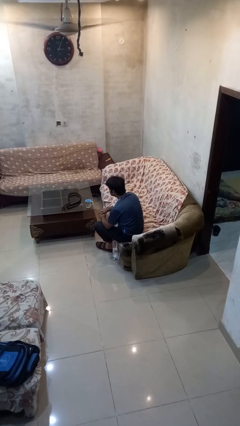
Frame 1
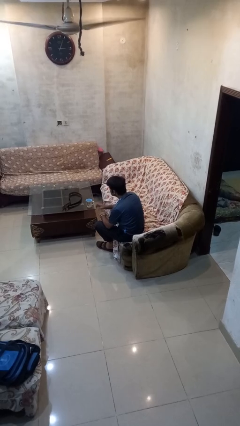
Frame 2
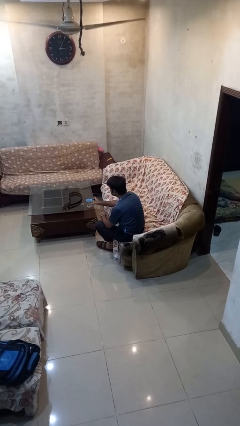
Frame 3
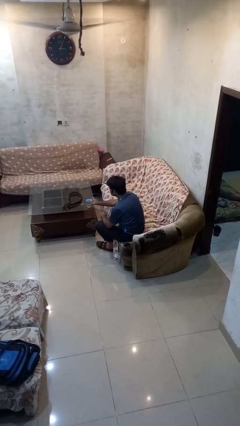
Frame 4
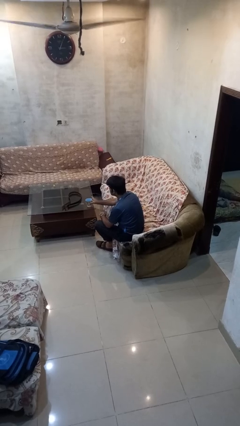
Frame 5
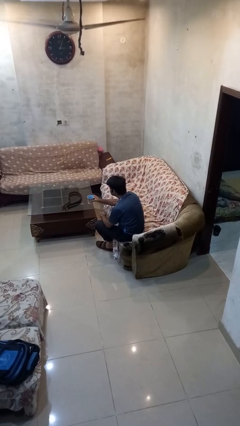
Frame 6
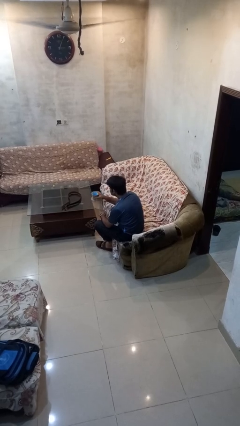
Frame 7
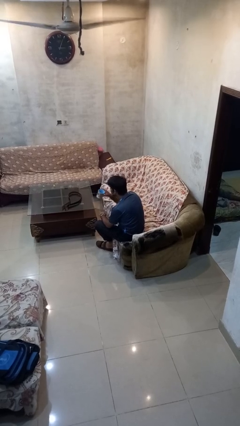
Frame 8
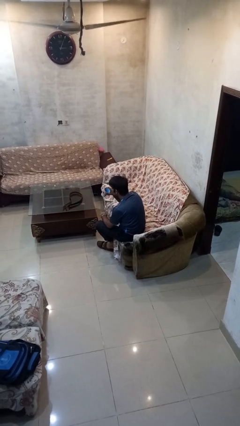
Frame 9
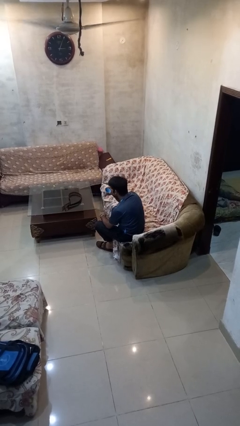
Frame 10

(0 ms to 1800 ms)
person picks up object from table

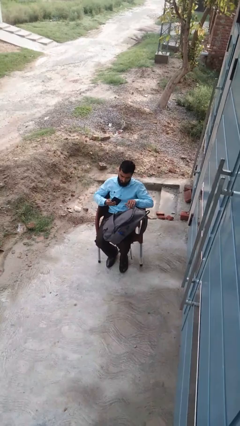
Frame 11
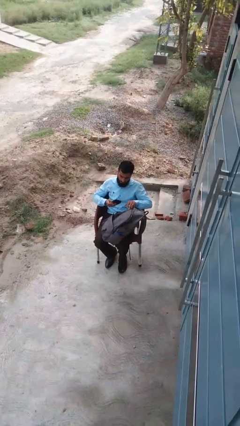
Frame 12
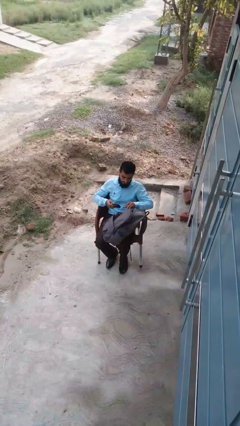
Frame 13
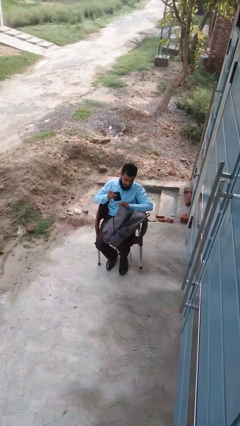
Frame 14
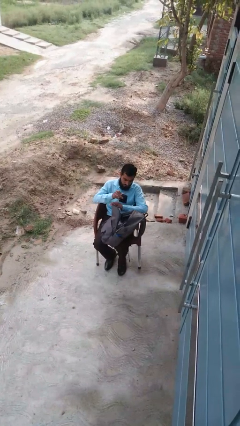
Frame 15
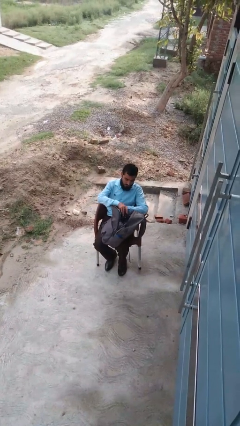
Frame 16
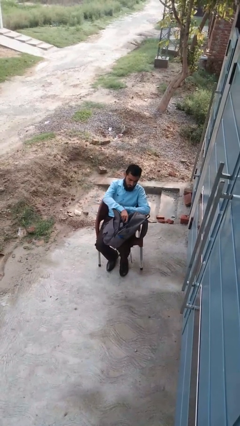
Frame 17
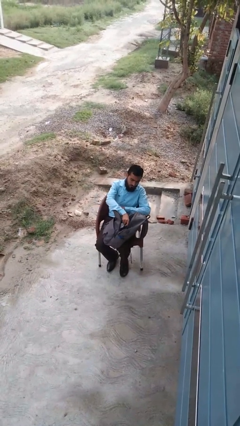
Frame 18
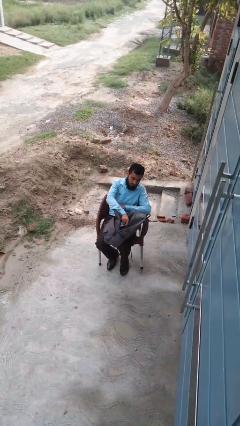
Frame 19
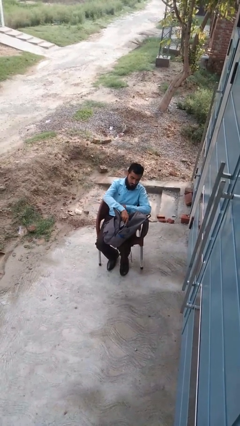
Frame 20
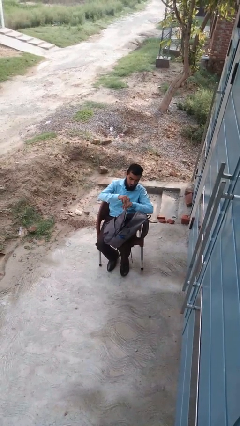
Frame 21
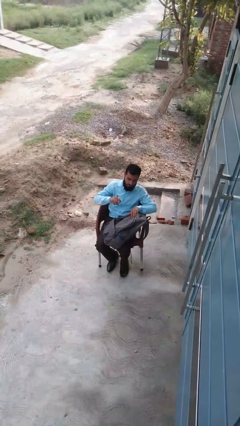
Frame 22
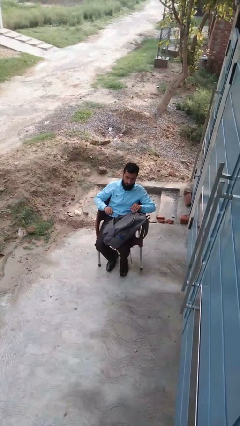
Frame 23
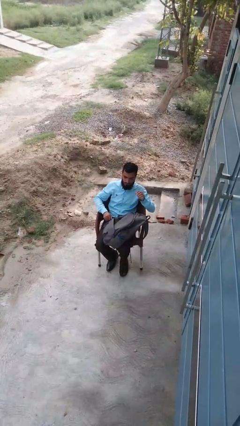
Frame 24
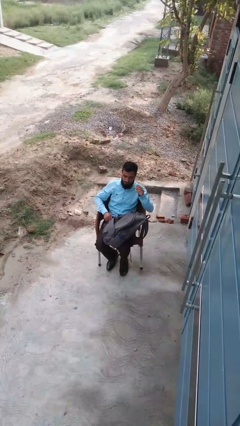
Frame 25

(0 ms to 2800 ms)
person puts object into backpack

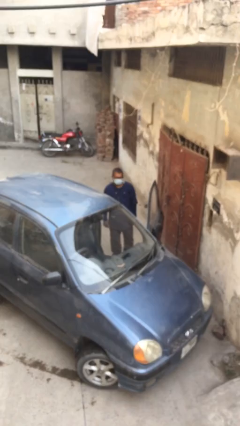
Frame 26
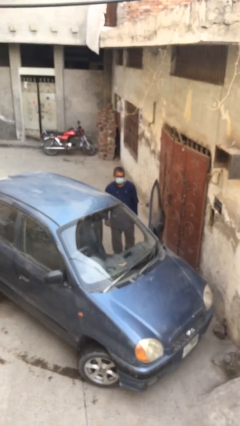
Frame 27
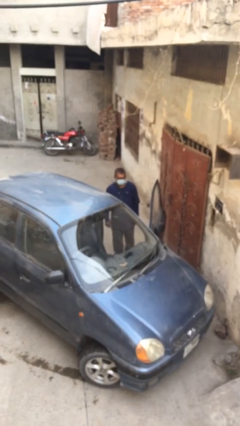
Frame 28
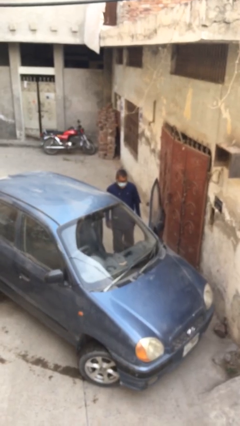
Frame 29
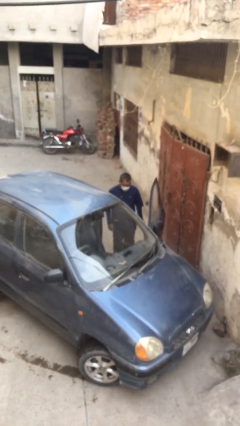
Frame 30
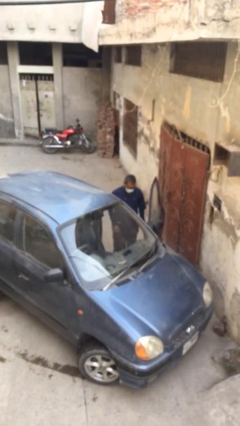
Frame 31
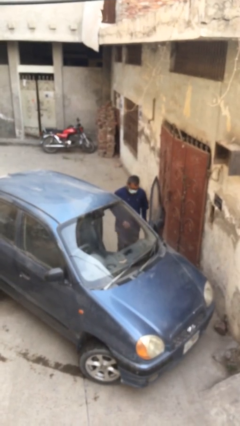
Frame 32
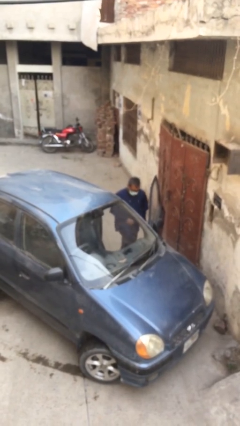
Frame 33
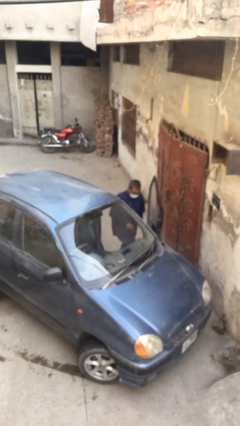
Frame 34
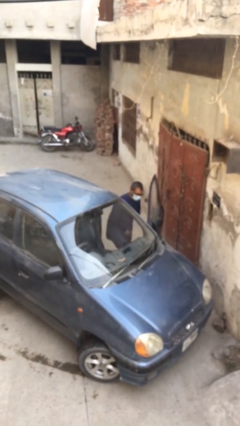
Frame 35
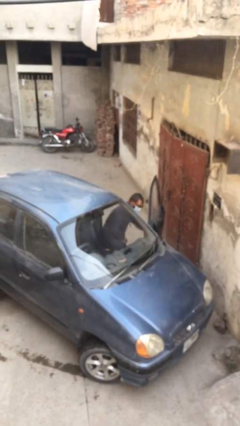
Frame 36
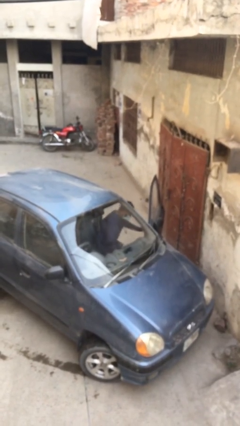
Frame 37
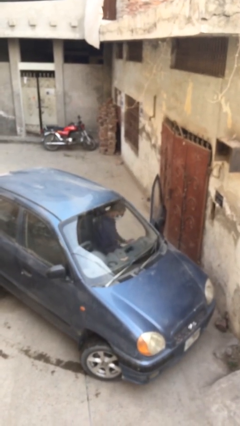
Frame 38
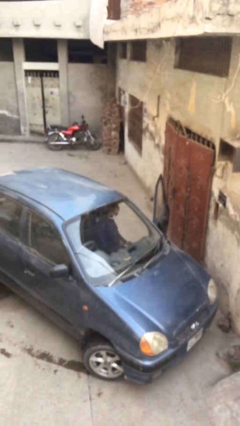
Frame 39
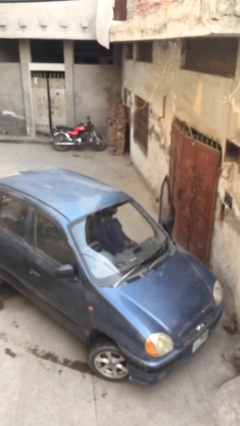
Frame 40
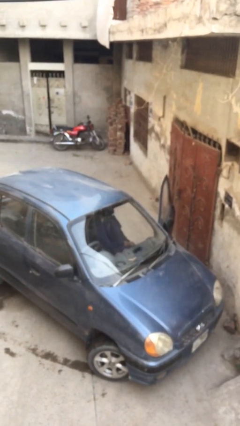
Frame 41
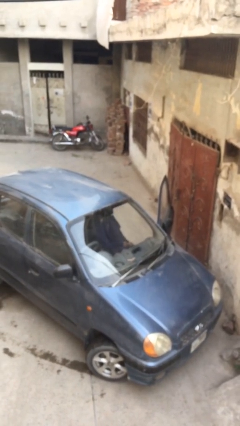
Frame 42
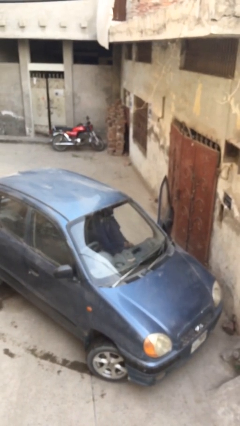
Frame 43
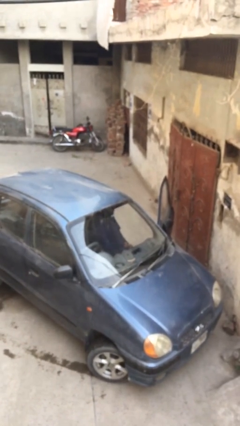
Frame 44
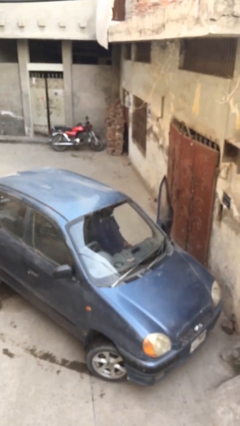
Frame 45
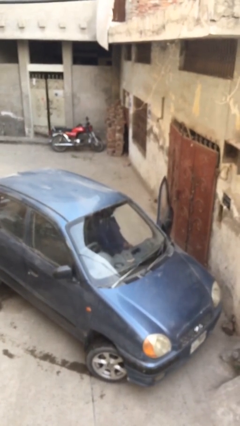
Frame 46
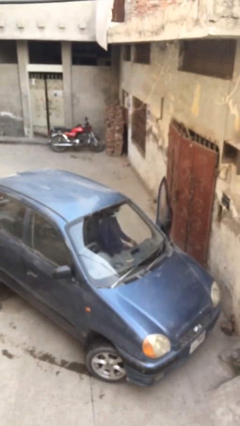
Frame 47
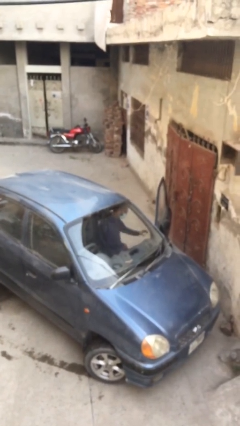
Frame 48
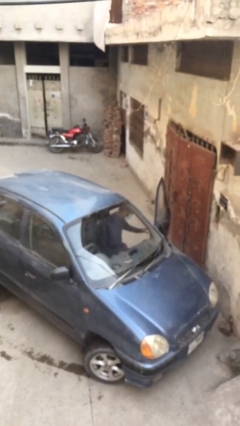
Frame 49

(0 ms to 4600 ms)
person enters car

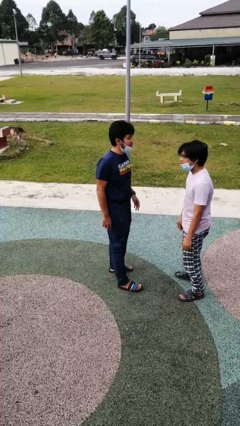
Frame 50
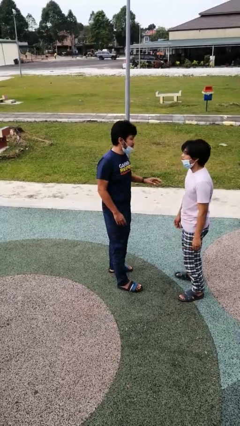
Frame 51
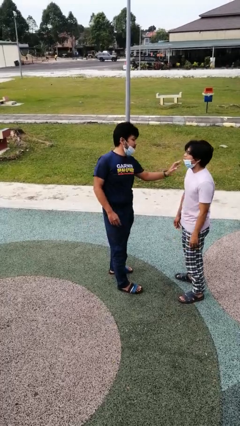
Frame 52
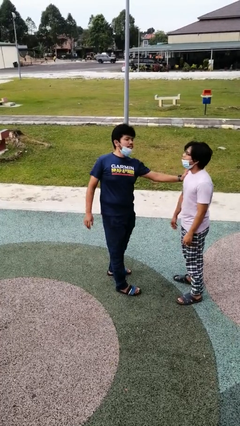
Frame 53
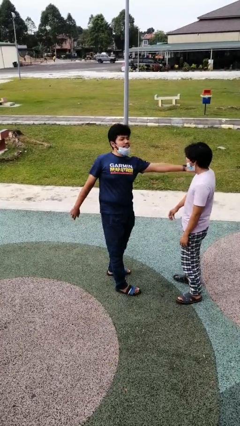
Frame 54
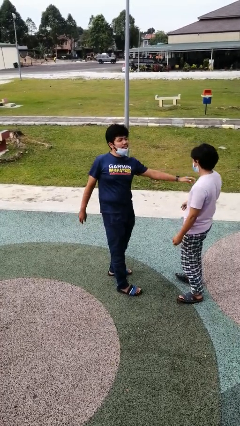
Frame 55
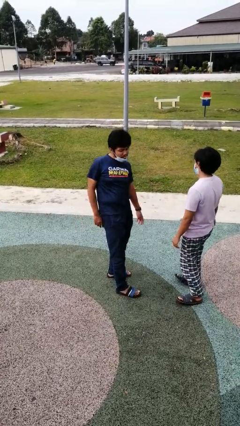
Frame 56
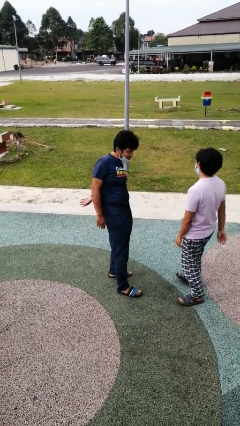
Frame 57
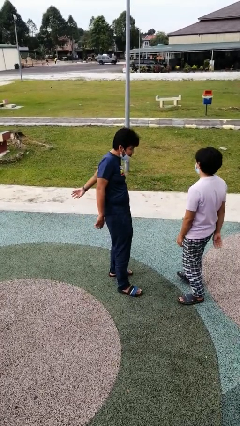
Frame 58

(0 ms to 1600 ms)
person shoves person

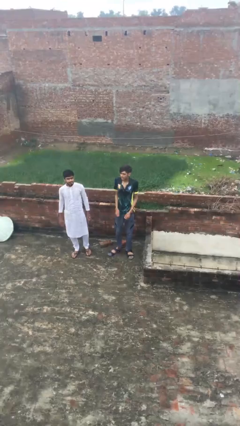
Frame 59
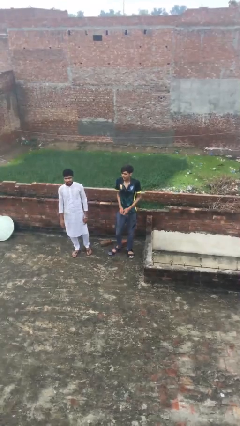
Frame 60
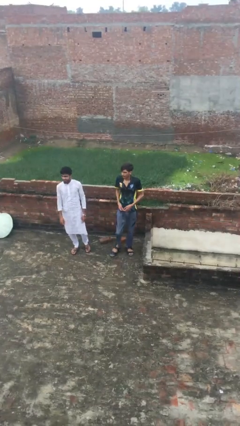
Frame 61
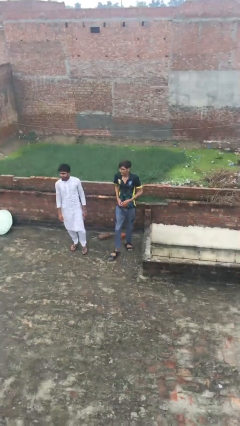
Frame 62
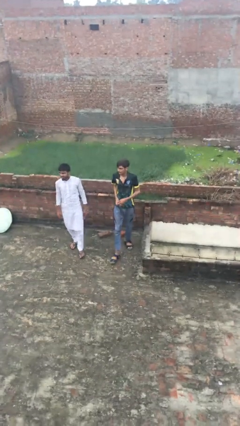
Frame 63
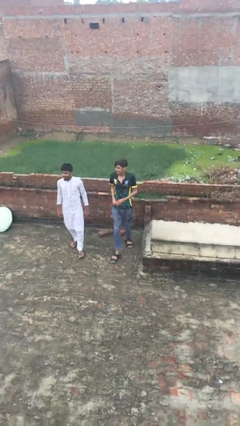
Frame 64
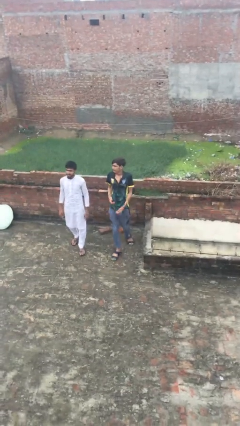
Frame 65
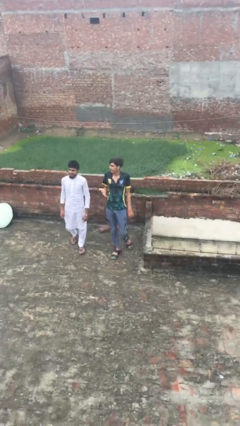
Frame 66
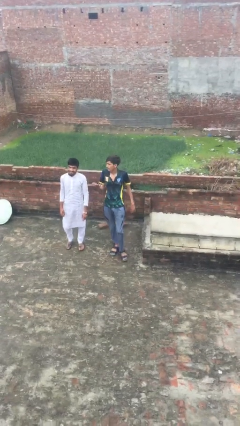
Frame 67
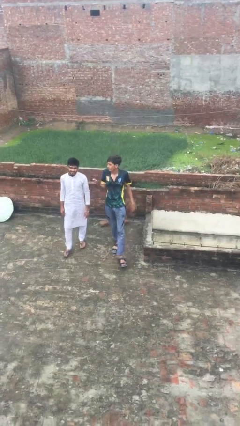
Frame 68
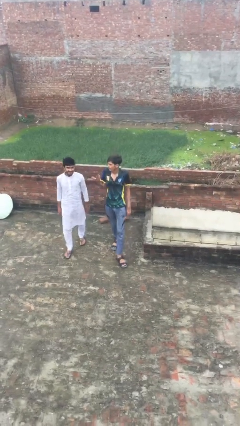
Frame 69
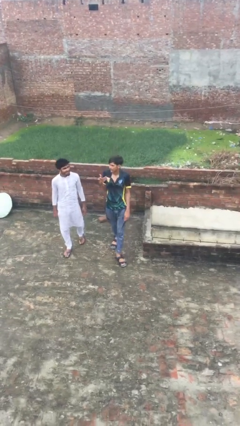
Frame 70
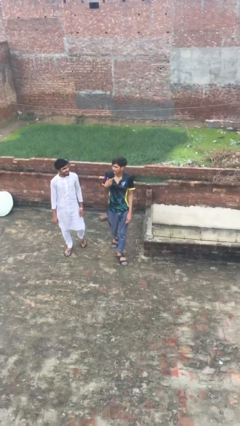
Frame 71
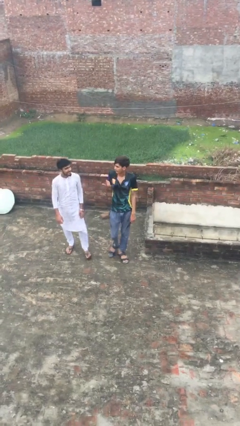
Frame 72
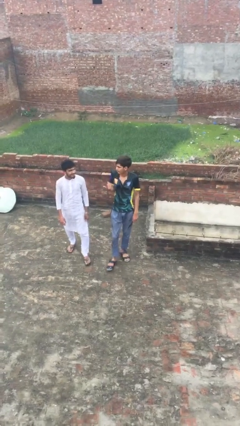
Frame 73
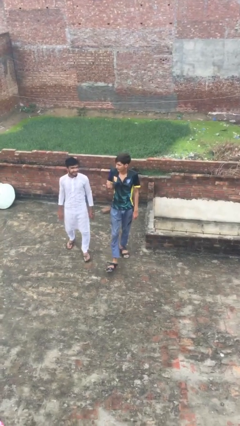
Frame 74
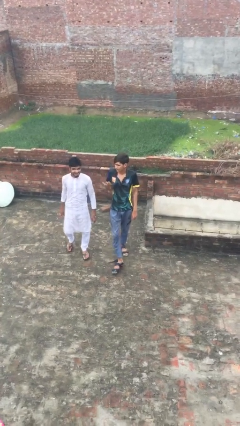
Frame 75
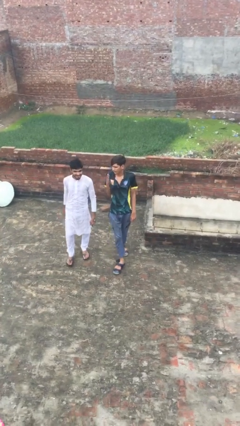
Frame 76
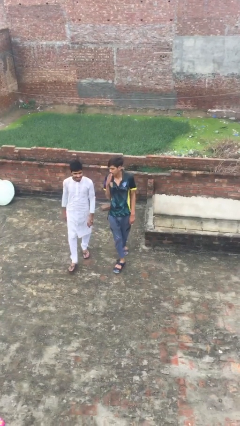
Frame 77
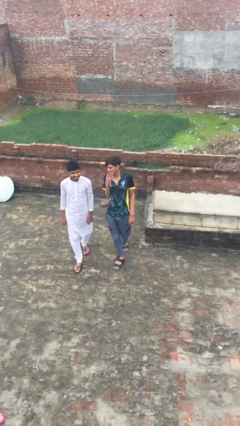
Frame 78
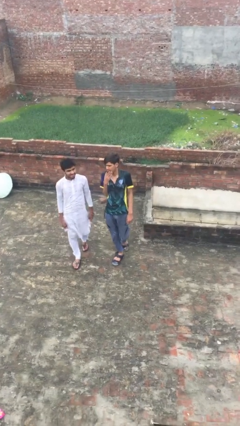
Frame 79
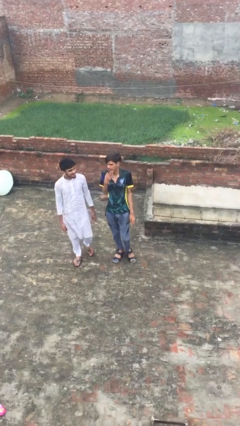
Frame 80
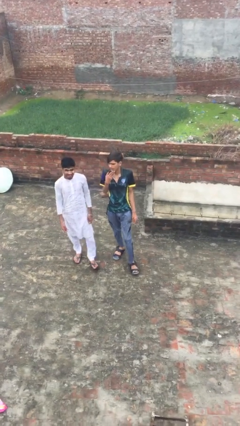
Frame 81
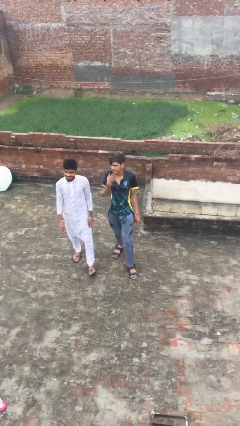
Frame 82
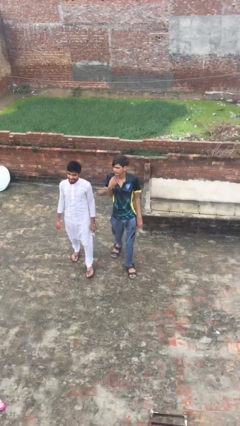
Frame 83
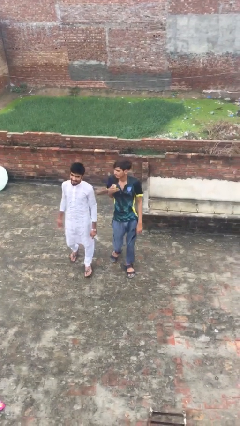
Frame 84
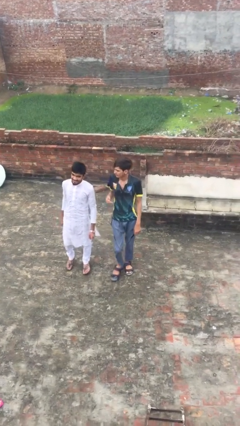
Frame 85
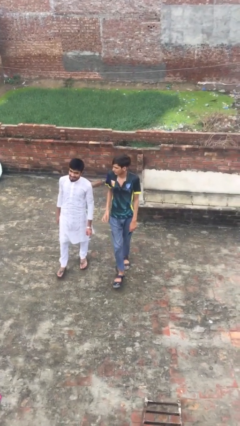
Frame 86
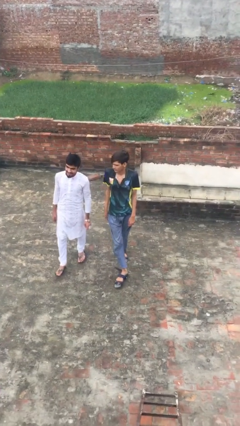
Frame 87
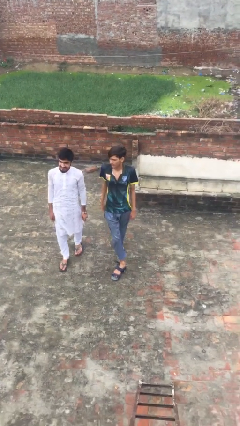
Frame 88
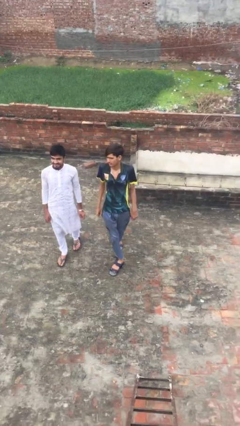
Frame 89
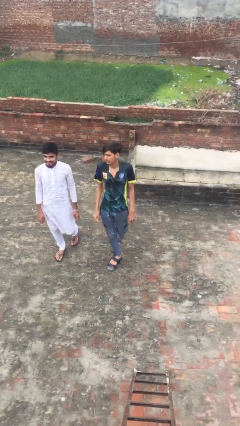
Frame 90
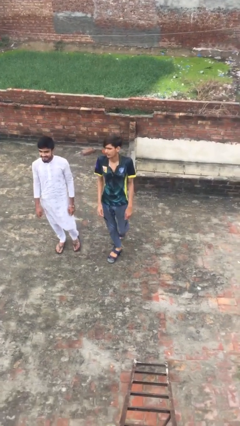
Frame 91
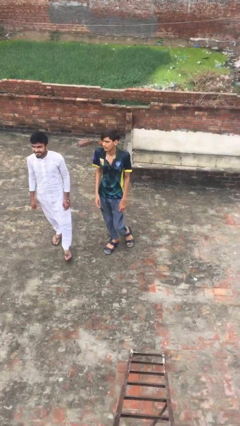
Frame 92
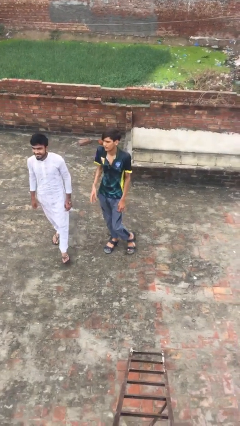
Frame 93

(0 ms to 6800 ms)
person talks to person

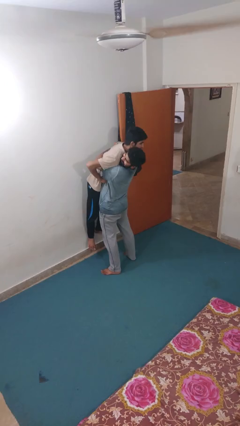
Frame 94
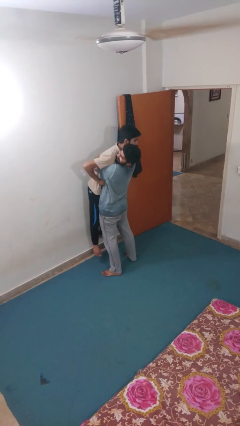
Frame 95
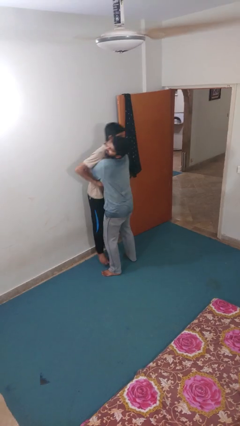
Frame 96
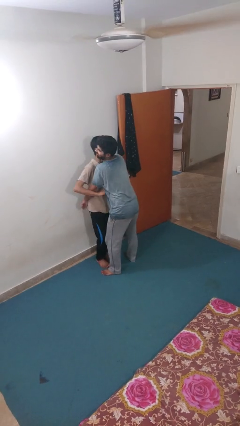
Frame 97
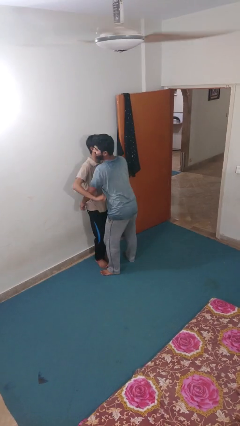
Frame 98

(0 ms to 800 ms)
person puts down person
